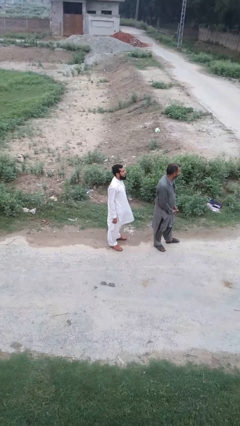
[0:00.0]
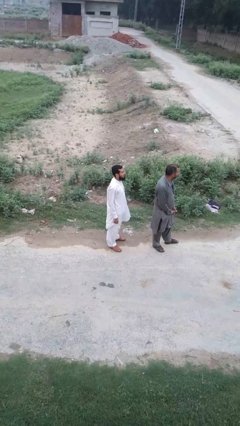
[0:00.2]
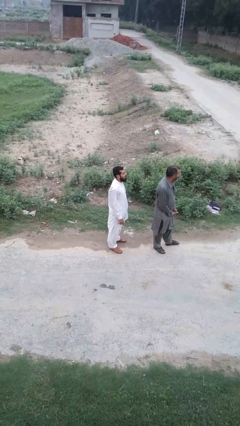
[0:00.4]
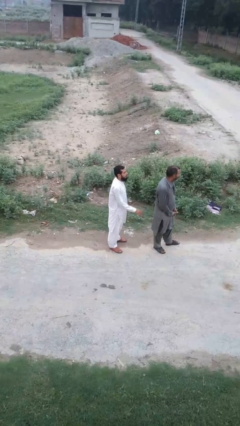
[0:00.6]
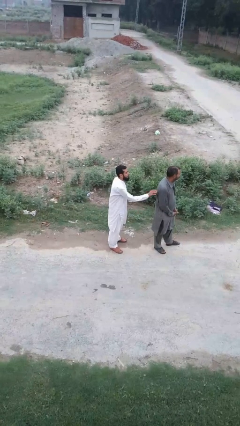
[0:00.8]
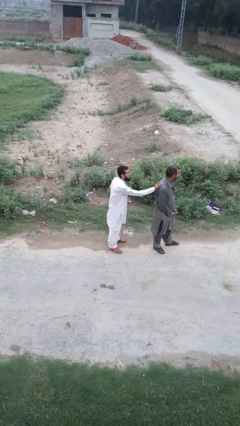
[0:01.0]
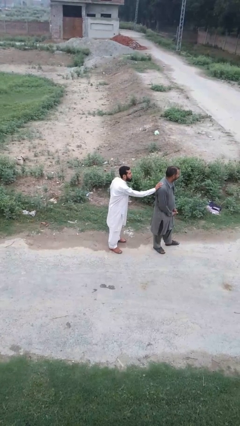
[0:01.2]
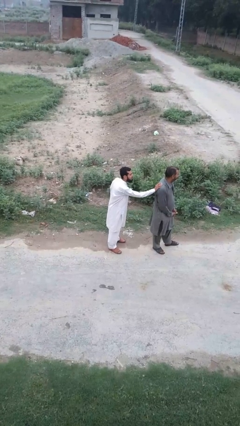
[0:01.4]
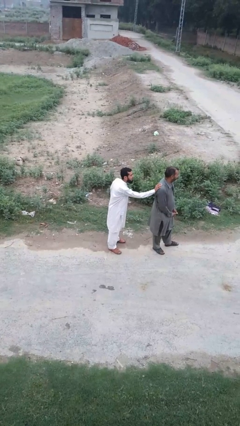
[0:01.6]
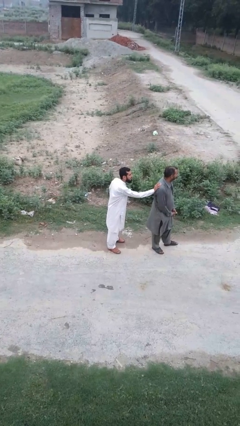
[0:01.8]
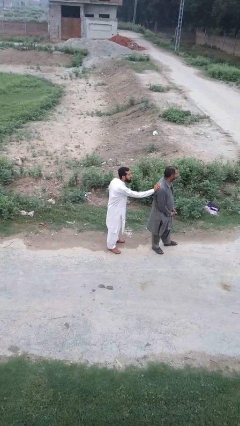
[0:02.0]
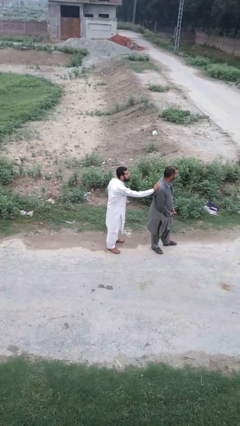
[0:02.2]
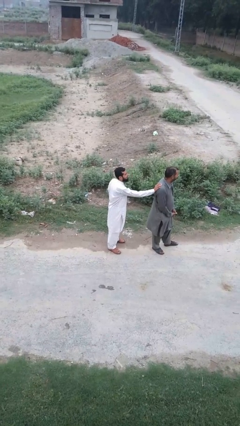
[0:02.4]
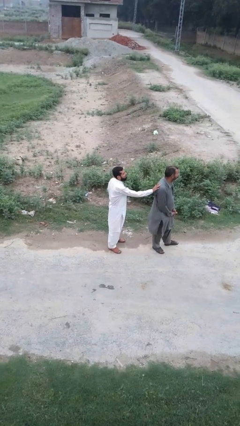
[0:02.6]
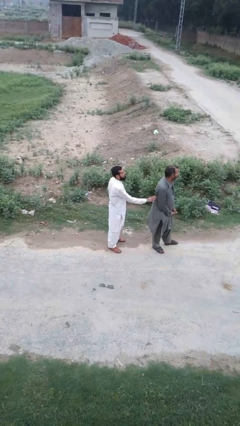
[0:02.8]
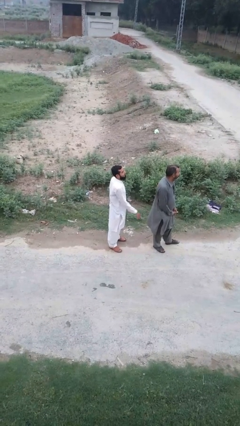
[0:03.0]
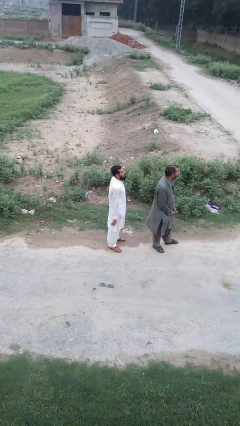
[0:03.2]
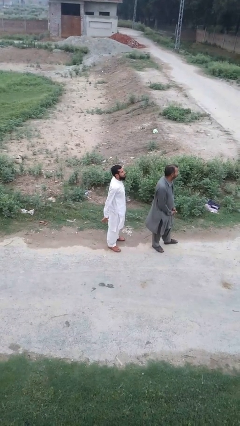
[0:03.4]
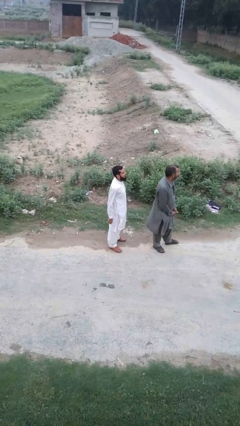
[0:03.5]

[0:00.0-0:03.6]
person touches back of person

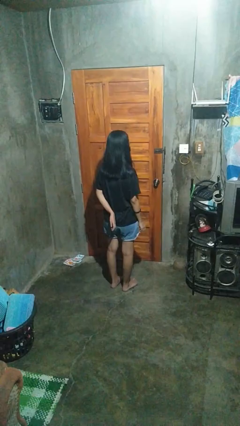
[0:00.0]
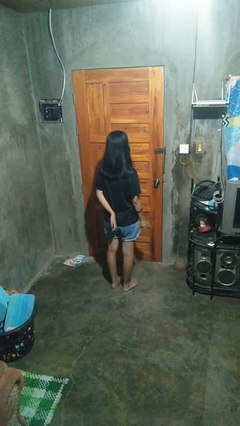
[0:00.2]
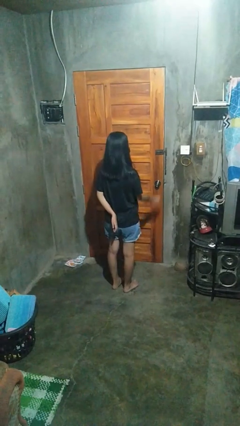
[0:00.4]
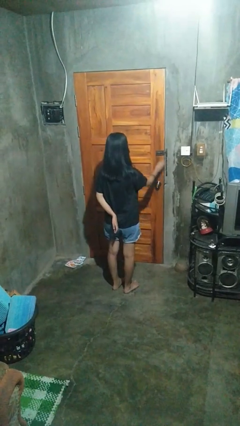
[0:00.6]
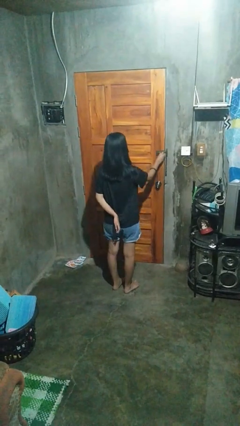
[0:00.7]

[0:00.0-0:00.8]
person unlocks door with keys

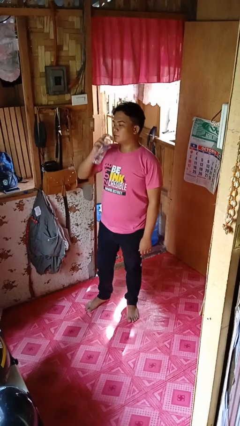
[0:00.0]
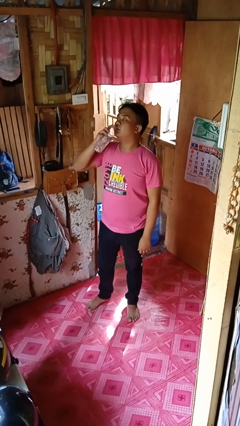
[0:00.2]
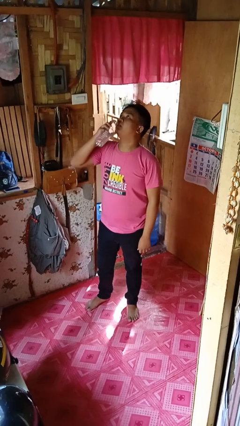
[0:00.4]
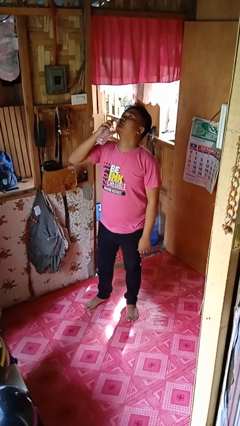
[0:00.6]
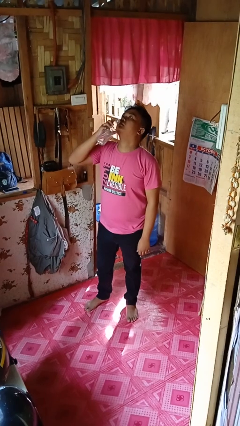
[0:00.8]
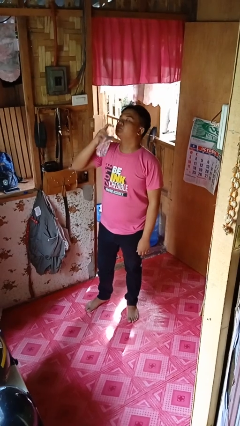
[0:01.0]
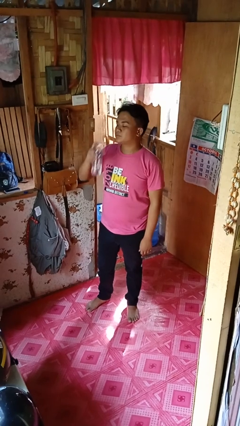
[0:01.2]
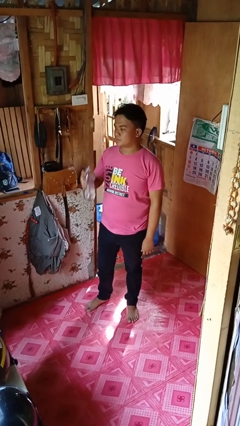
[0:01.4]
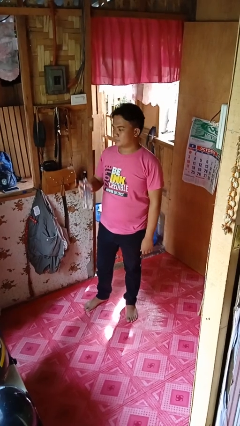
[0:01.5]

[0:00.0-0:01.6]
person drinks from bottle

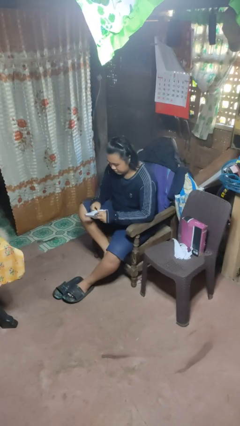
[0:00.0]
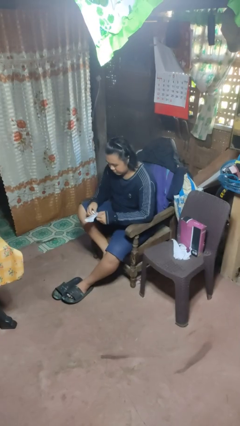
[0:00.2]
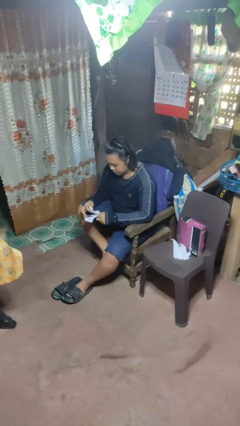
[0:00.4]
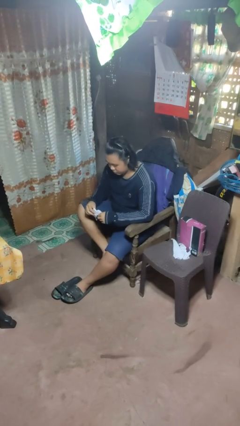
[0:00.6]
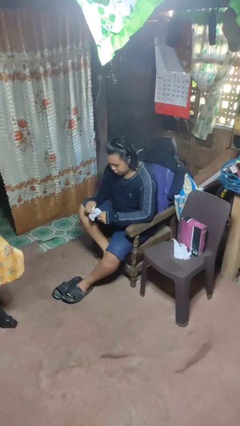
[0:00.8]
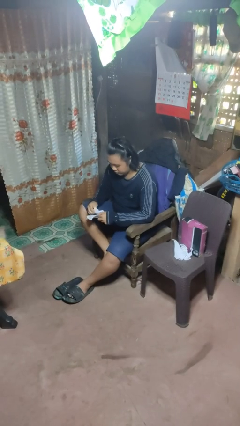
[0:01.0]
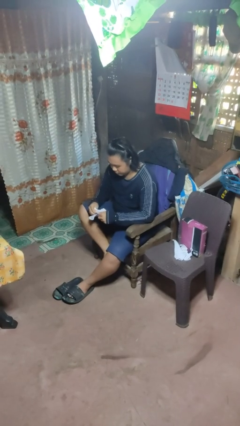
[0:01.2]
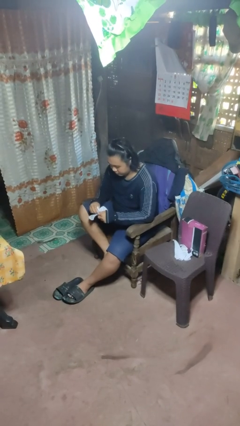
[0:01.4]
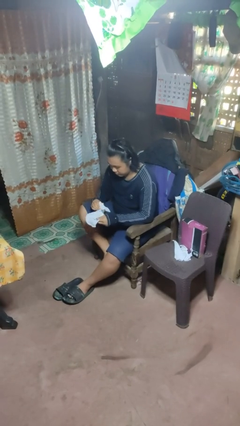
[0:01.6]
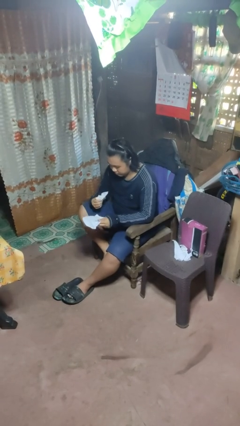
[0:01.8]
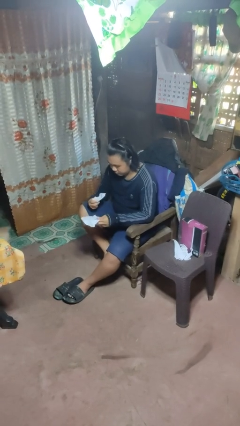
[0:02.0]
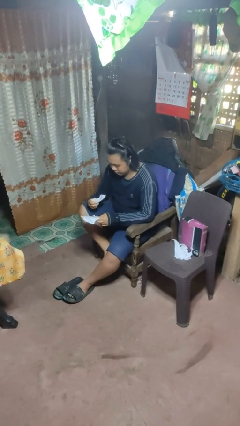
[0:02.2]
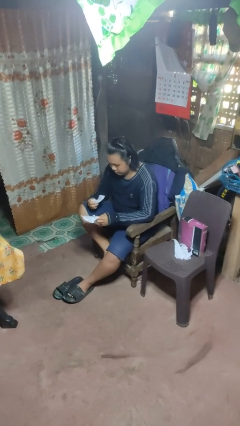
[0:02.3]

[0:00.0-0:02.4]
person tears paper

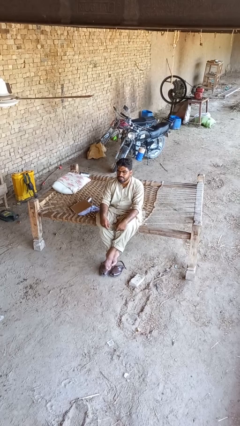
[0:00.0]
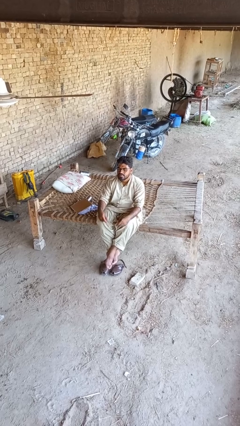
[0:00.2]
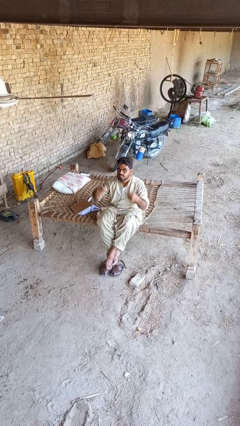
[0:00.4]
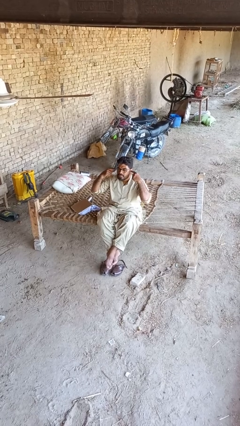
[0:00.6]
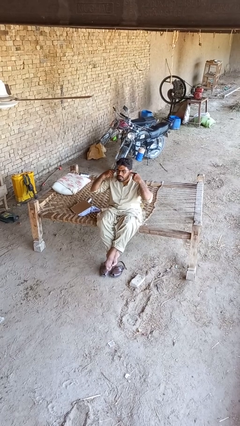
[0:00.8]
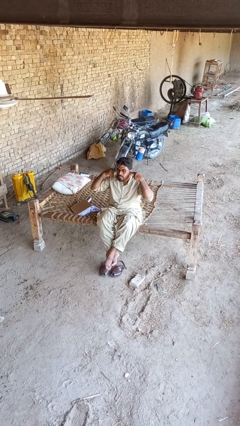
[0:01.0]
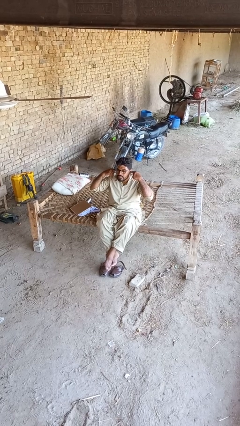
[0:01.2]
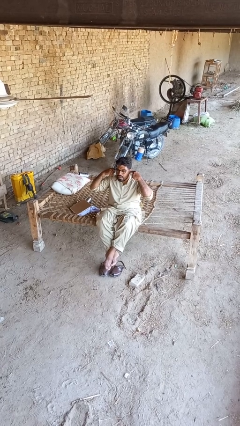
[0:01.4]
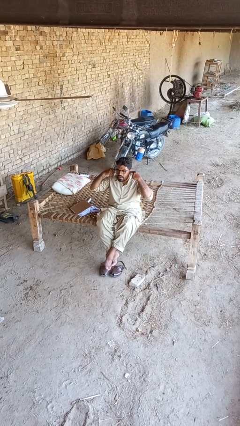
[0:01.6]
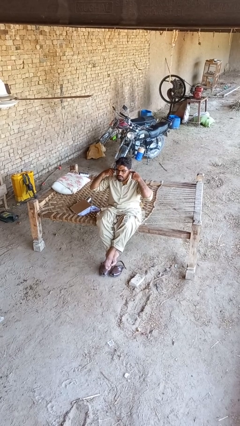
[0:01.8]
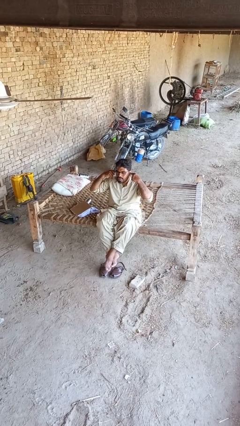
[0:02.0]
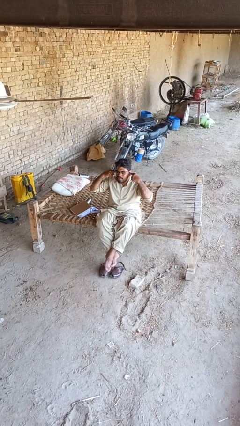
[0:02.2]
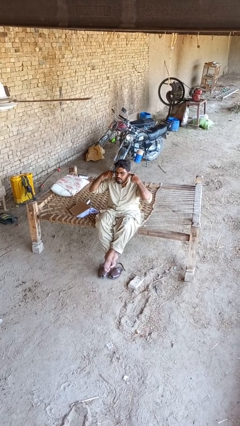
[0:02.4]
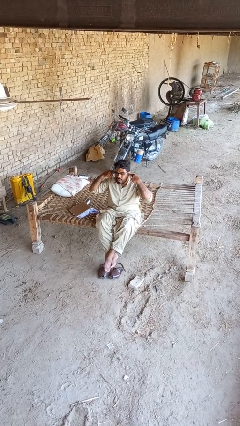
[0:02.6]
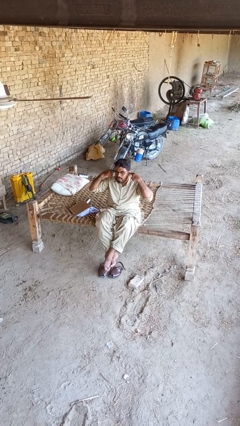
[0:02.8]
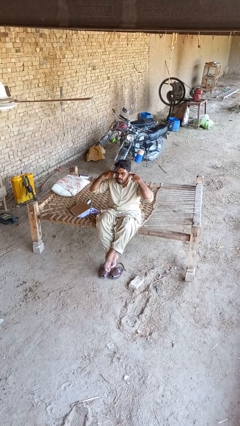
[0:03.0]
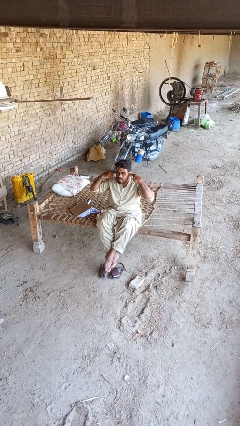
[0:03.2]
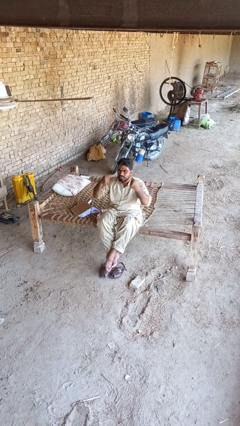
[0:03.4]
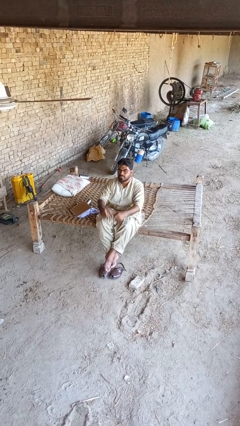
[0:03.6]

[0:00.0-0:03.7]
person puts fingers in ear

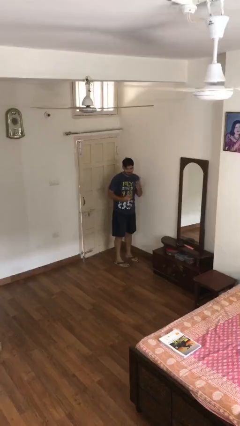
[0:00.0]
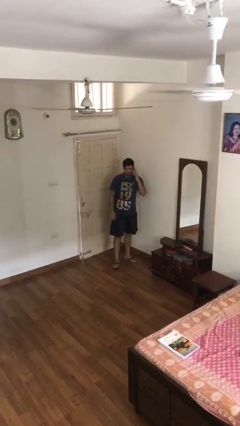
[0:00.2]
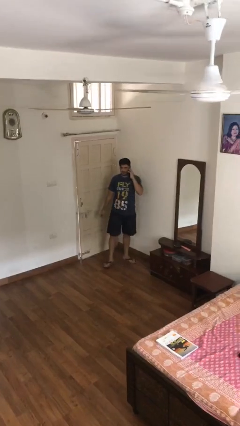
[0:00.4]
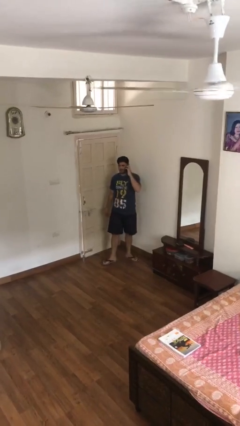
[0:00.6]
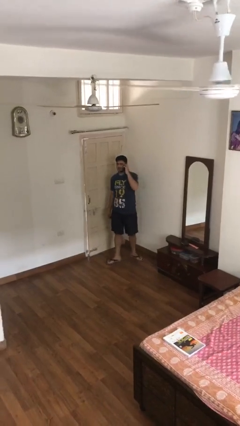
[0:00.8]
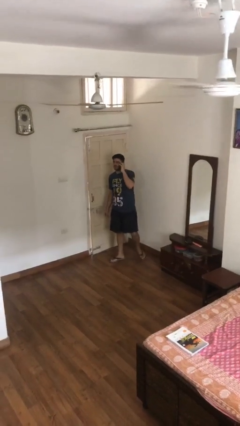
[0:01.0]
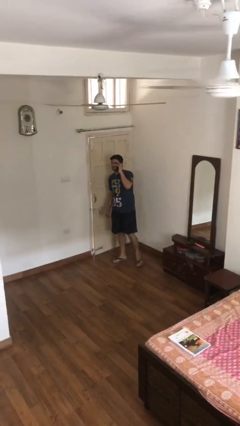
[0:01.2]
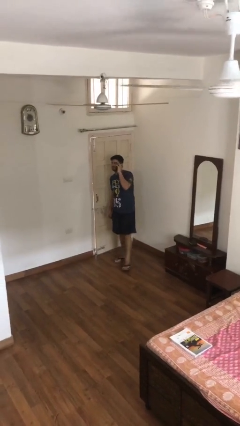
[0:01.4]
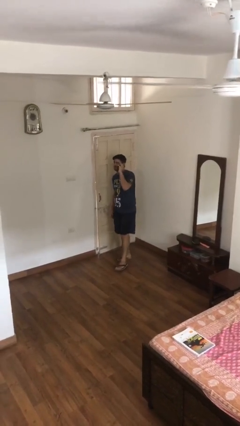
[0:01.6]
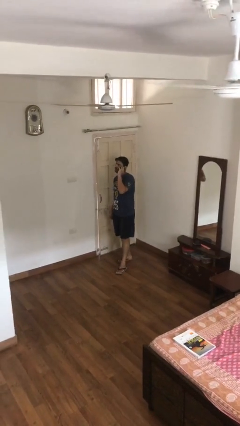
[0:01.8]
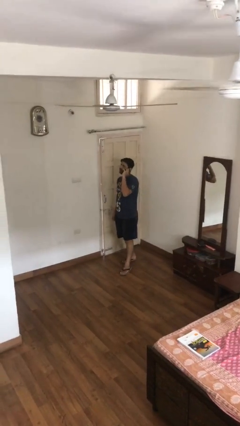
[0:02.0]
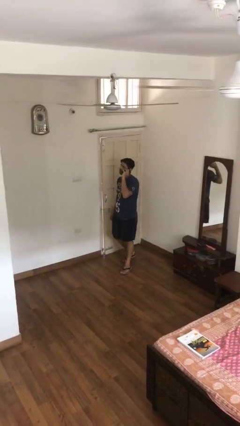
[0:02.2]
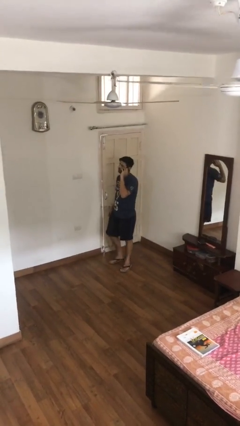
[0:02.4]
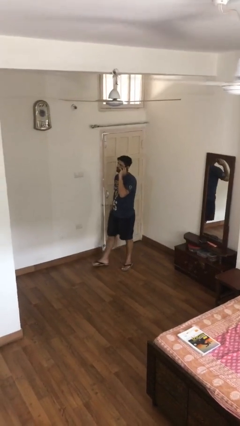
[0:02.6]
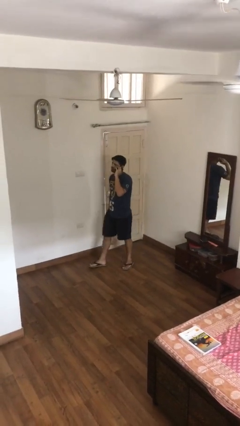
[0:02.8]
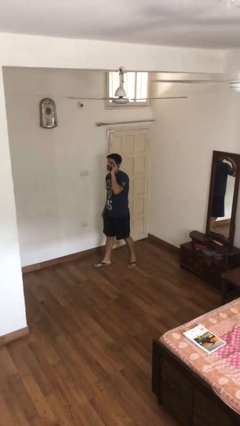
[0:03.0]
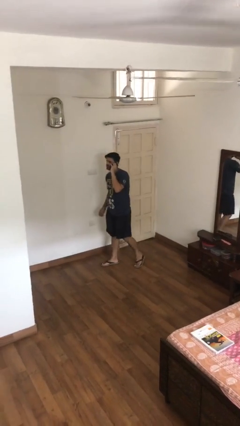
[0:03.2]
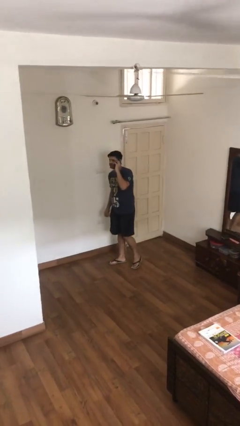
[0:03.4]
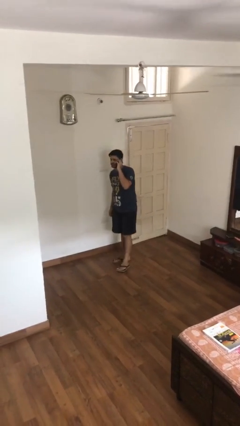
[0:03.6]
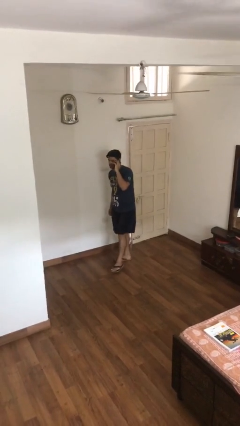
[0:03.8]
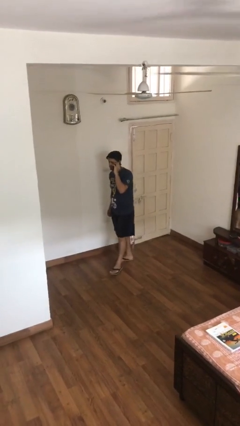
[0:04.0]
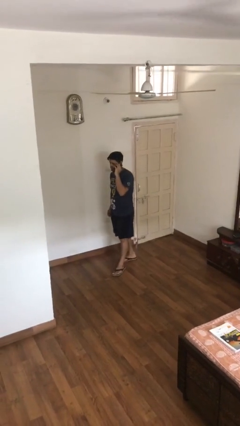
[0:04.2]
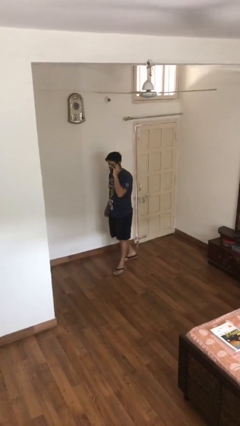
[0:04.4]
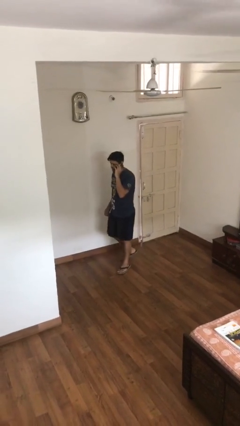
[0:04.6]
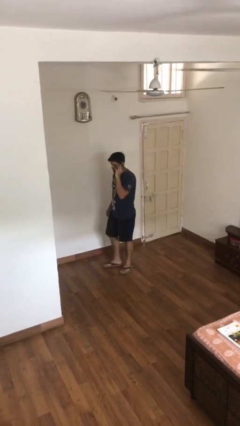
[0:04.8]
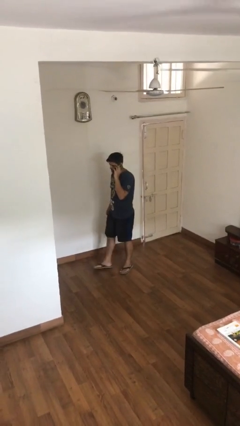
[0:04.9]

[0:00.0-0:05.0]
person talks on phone

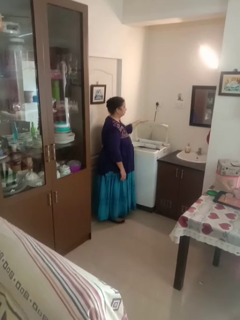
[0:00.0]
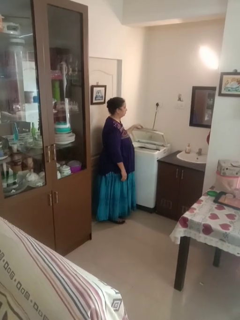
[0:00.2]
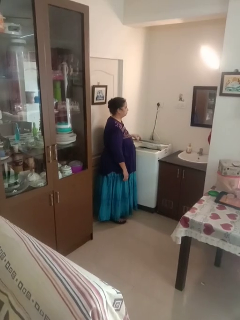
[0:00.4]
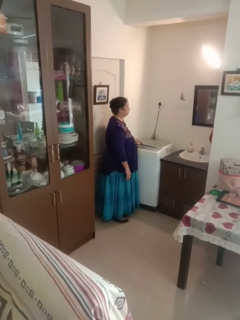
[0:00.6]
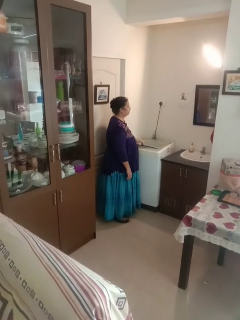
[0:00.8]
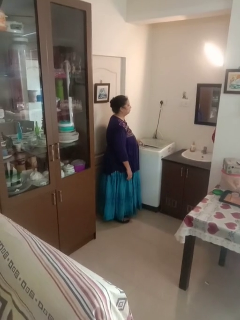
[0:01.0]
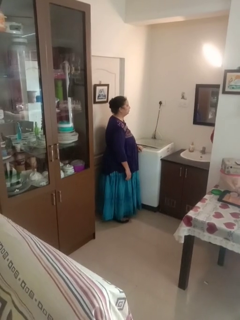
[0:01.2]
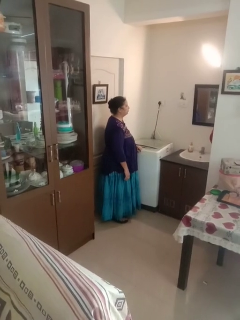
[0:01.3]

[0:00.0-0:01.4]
person closes clothes washer
